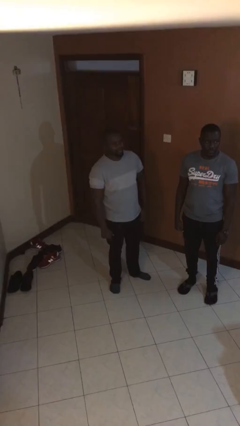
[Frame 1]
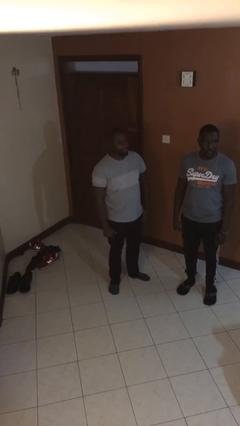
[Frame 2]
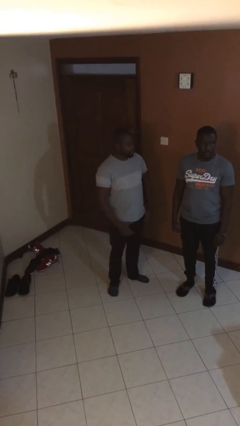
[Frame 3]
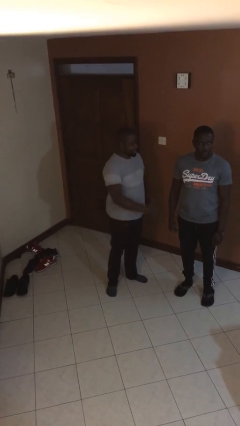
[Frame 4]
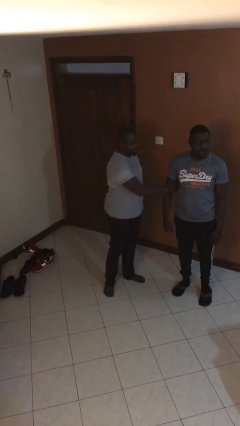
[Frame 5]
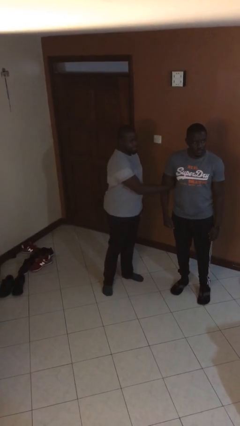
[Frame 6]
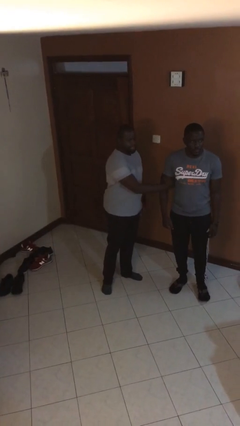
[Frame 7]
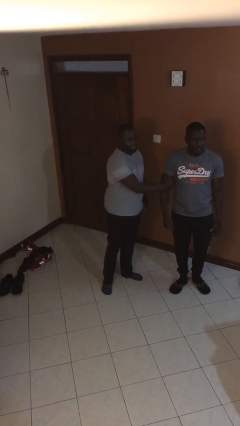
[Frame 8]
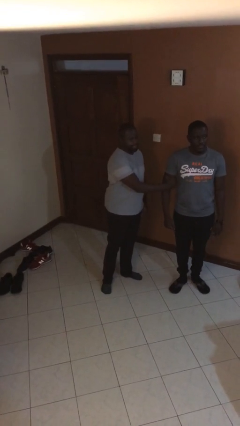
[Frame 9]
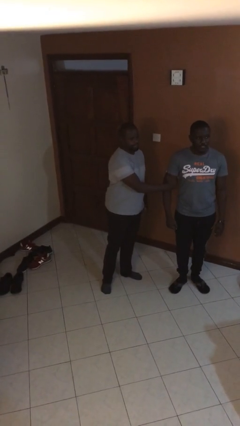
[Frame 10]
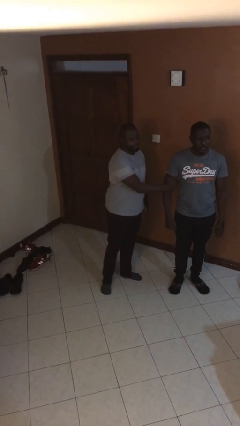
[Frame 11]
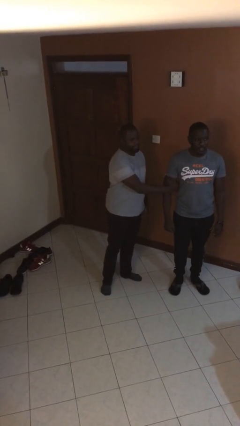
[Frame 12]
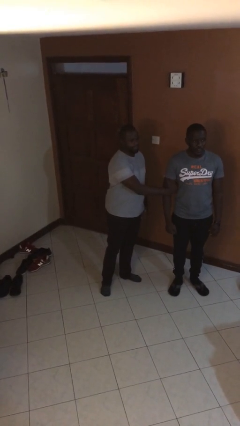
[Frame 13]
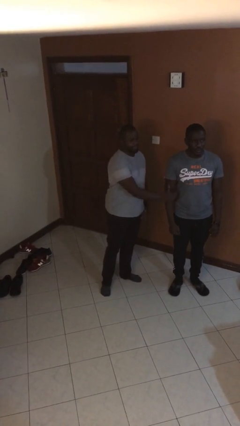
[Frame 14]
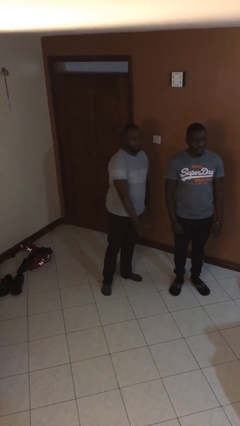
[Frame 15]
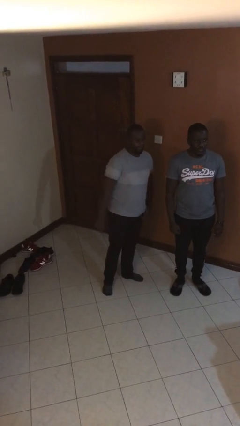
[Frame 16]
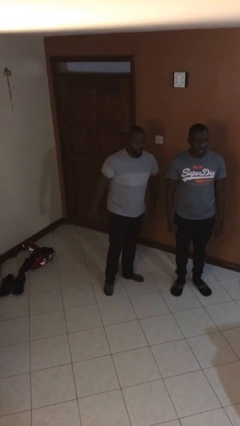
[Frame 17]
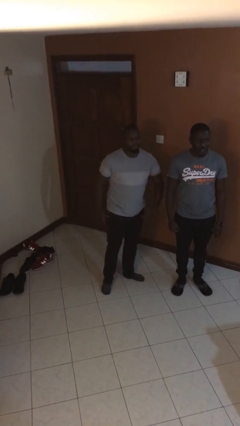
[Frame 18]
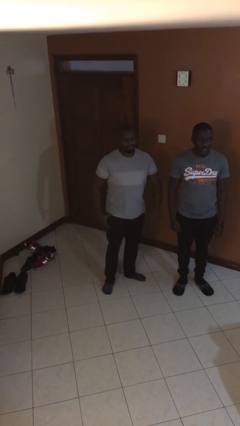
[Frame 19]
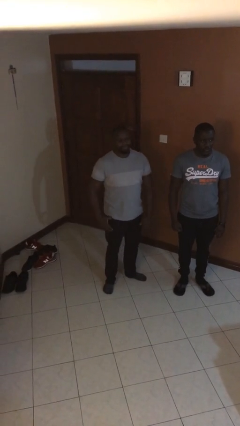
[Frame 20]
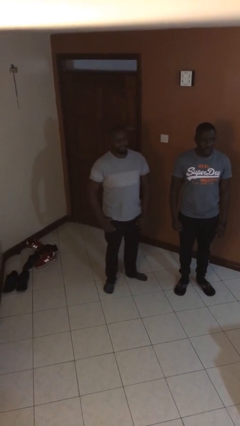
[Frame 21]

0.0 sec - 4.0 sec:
person grabs person by bicep

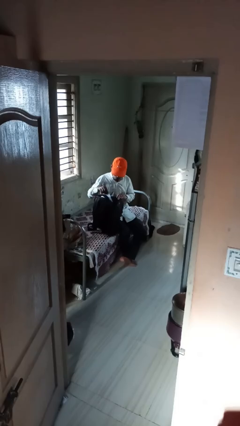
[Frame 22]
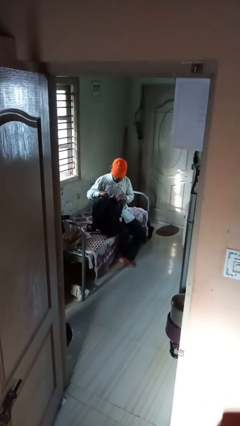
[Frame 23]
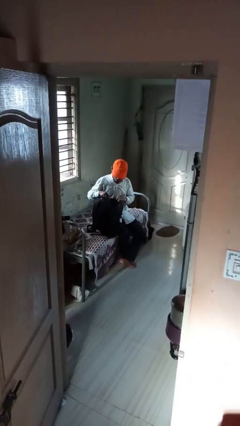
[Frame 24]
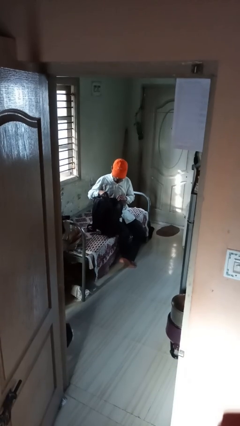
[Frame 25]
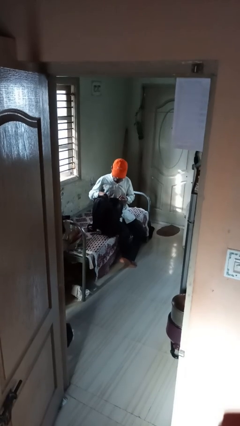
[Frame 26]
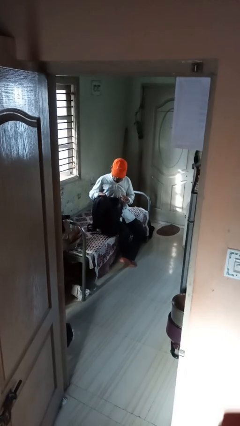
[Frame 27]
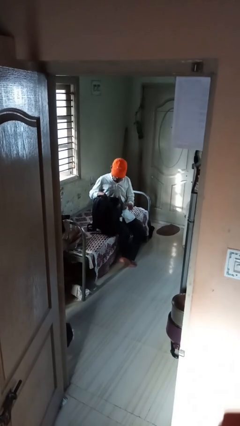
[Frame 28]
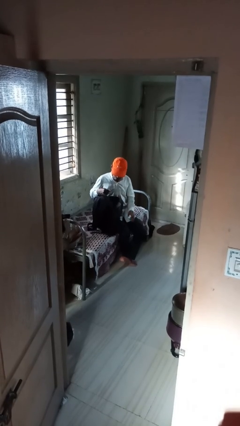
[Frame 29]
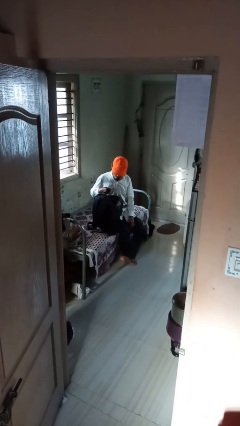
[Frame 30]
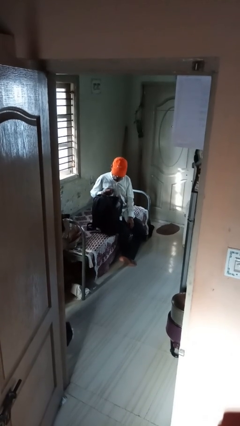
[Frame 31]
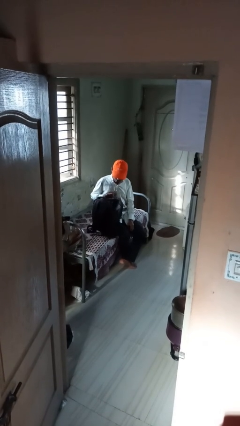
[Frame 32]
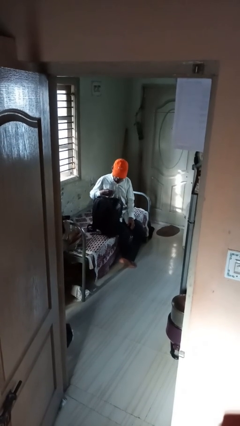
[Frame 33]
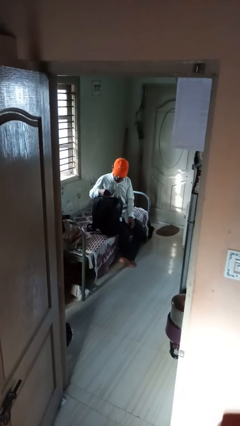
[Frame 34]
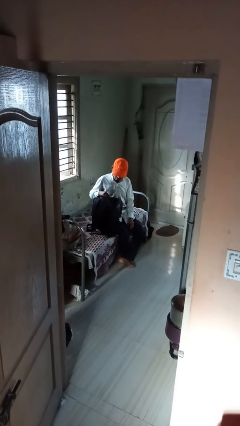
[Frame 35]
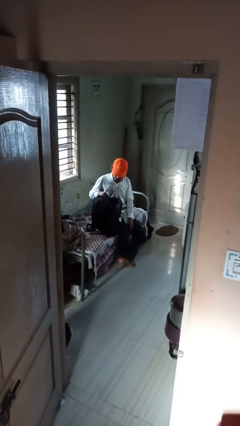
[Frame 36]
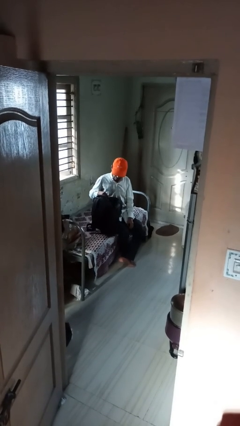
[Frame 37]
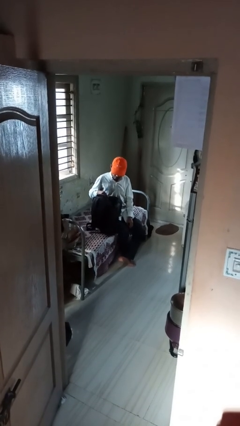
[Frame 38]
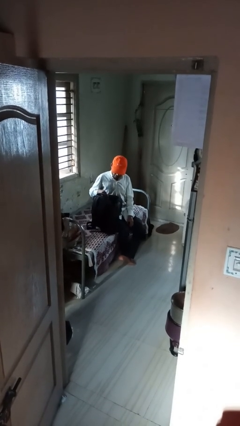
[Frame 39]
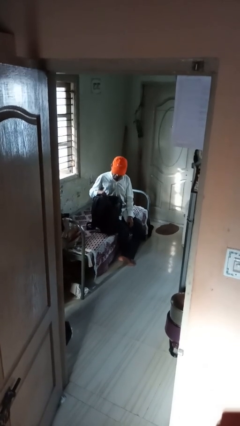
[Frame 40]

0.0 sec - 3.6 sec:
person puts object into backpack

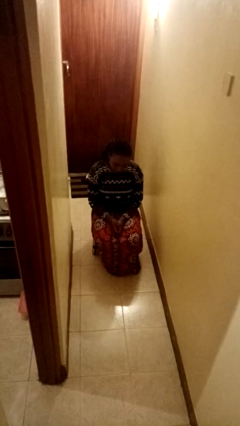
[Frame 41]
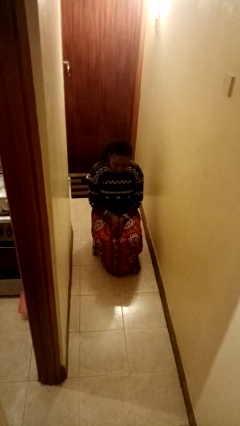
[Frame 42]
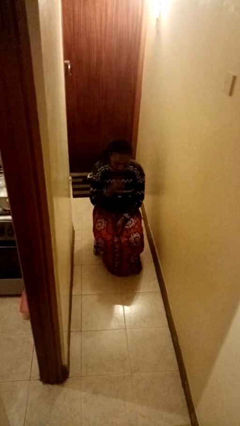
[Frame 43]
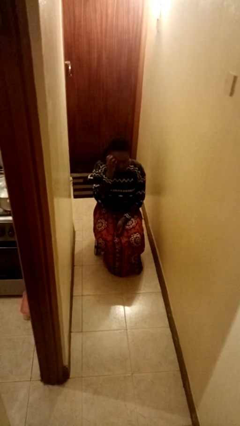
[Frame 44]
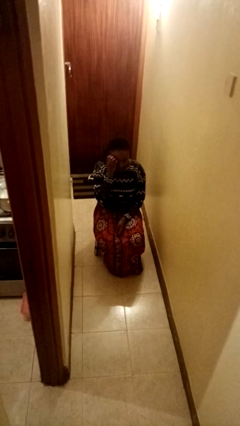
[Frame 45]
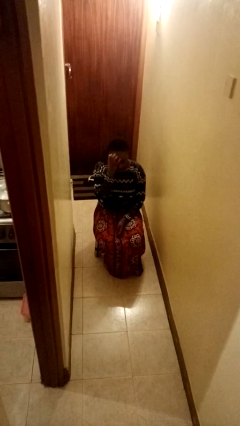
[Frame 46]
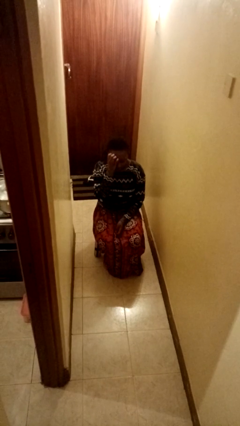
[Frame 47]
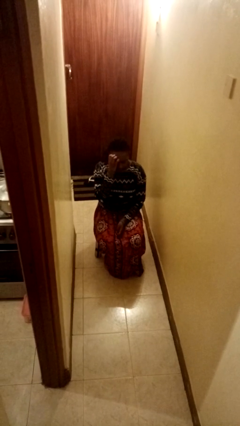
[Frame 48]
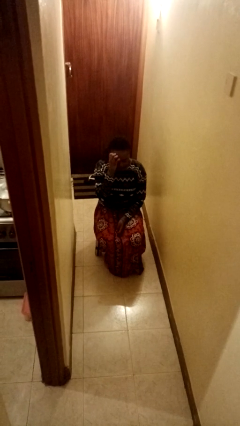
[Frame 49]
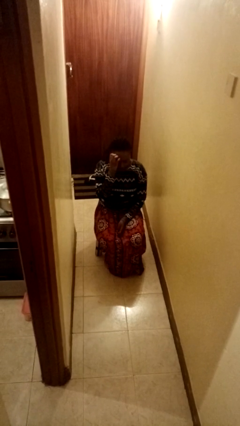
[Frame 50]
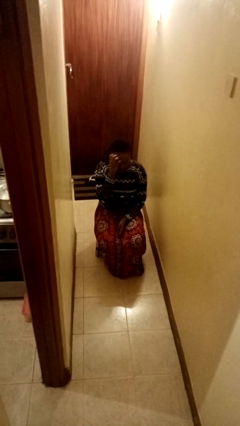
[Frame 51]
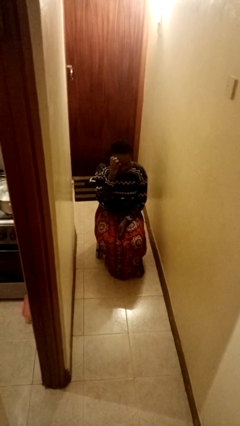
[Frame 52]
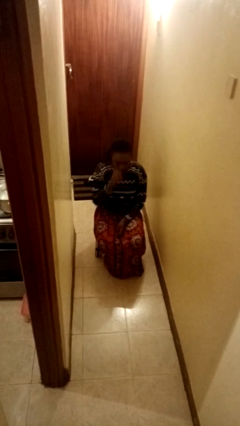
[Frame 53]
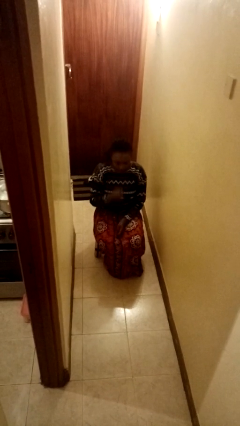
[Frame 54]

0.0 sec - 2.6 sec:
person scratches face

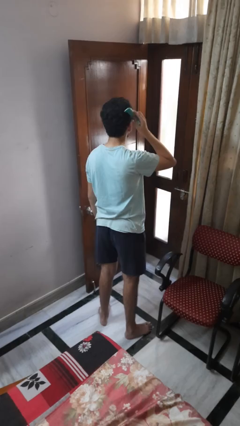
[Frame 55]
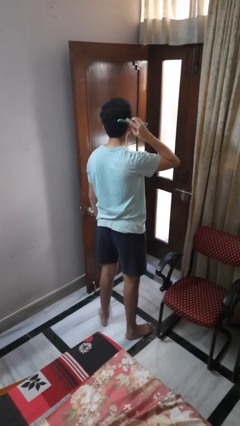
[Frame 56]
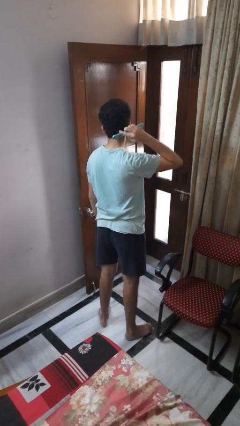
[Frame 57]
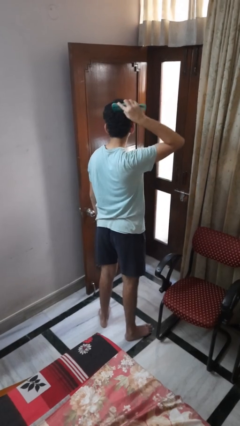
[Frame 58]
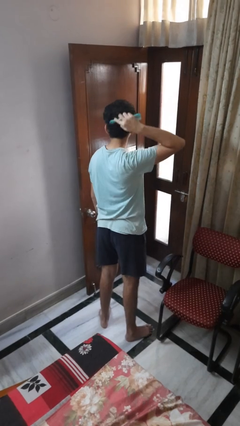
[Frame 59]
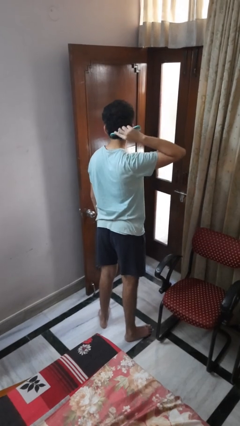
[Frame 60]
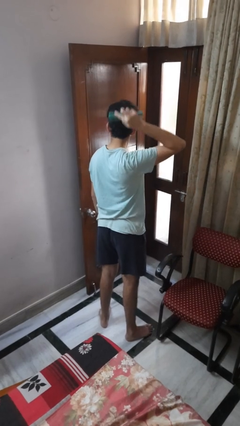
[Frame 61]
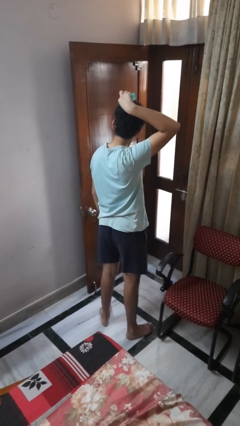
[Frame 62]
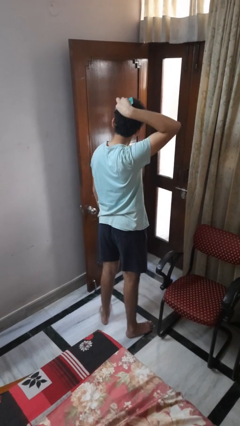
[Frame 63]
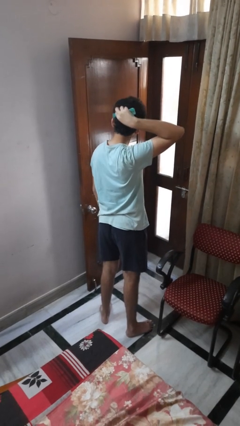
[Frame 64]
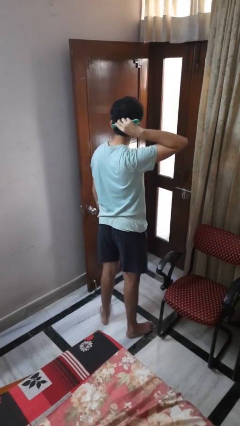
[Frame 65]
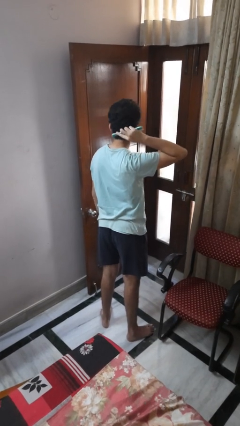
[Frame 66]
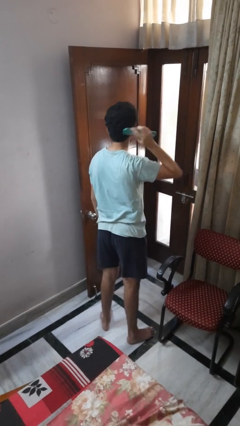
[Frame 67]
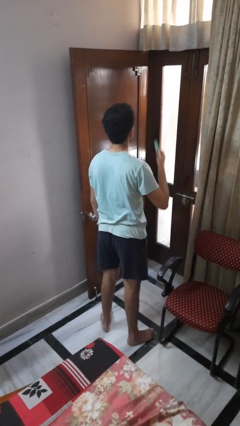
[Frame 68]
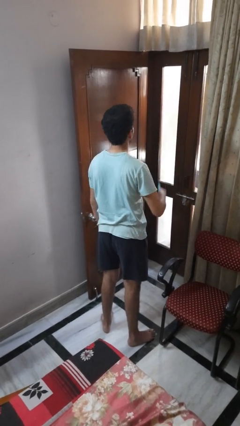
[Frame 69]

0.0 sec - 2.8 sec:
person brushes hair

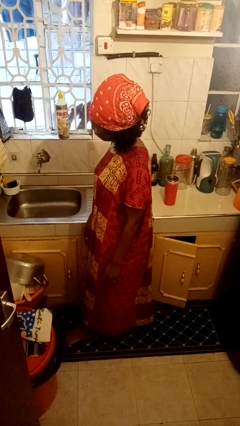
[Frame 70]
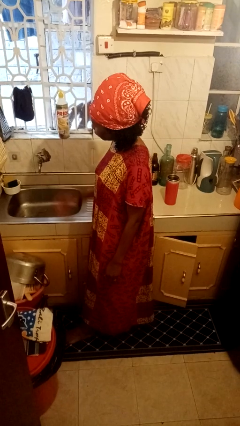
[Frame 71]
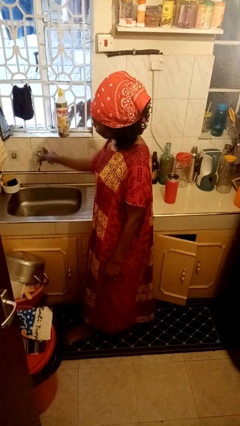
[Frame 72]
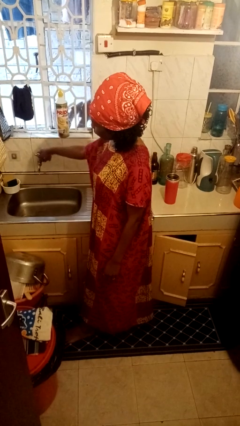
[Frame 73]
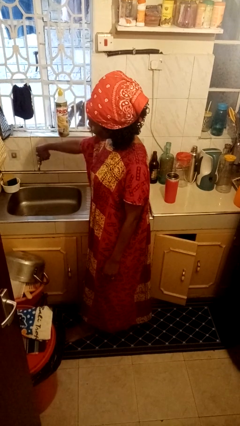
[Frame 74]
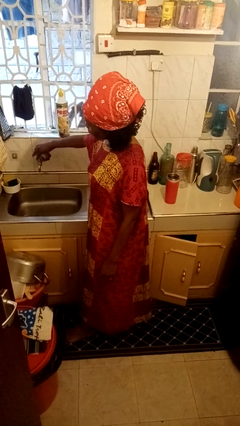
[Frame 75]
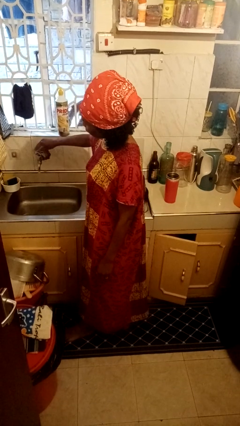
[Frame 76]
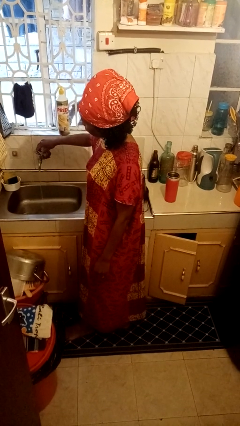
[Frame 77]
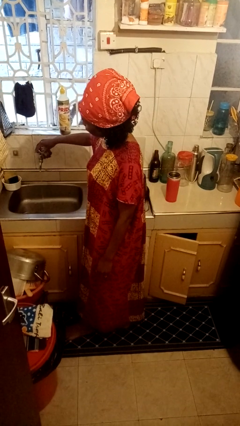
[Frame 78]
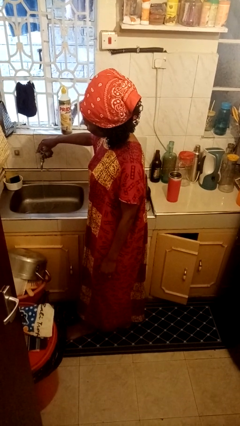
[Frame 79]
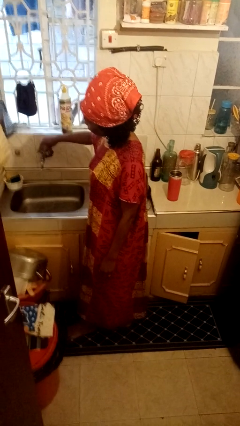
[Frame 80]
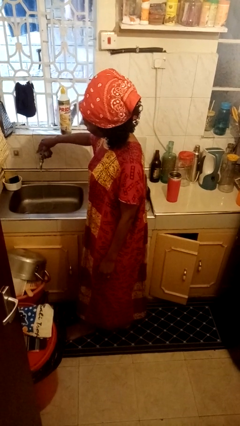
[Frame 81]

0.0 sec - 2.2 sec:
person turns on faucet

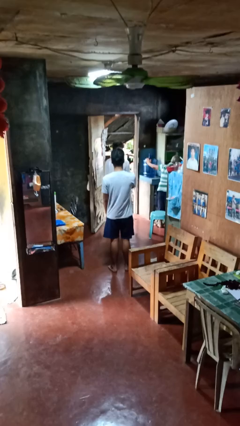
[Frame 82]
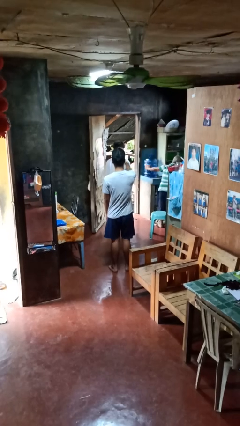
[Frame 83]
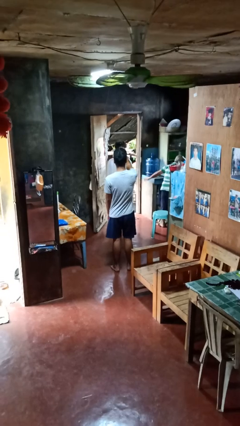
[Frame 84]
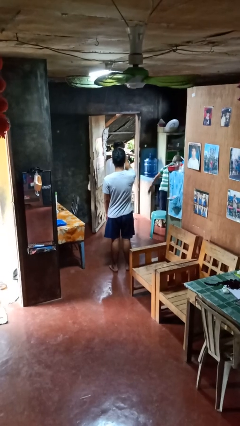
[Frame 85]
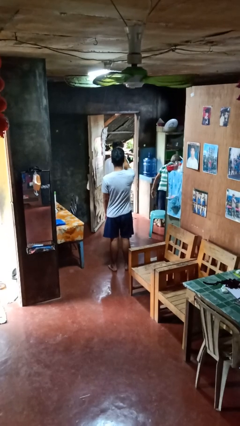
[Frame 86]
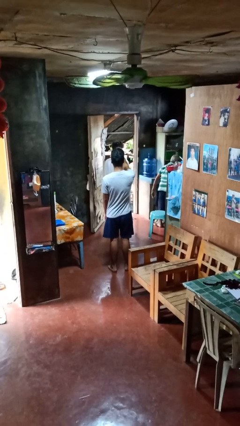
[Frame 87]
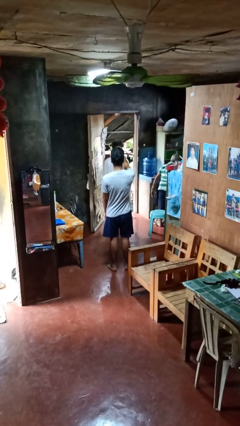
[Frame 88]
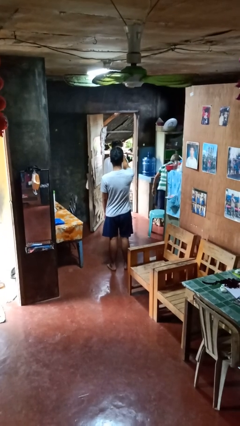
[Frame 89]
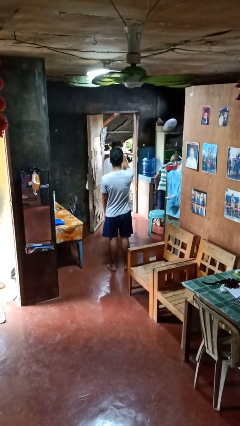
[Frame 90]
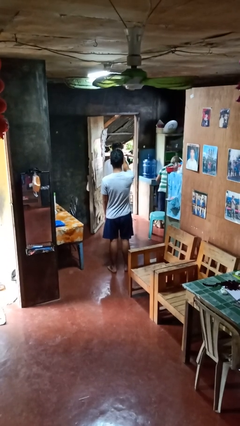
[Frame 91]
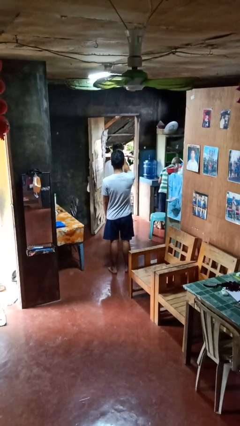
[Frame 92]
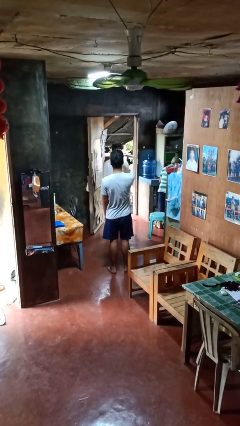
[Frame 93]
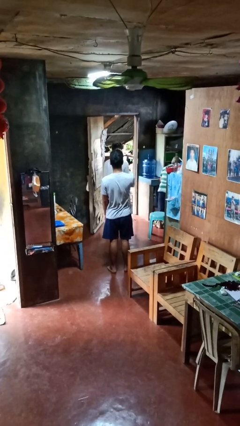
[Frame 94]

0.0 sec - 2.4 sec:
person points at person
